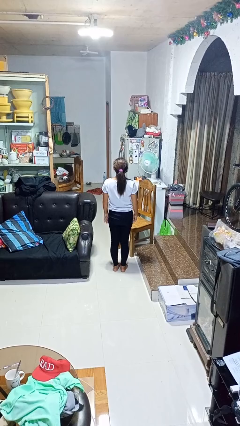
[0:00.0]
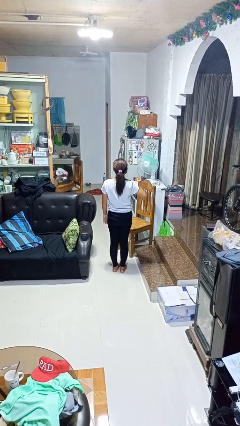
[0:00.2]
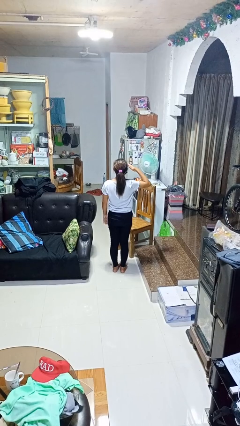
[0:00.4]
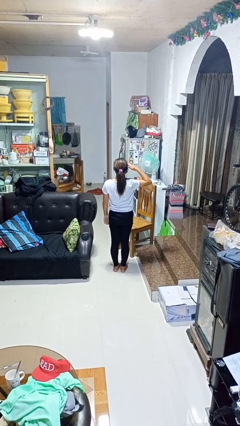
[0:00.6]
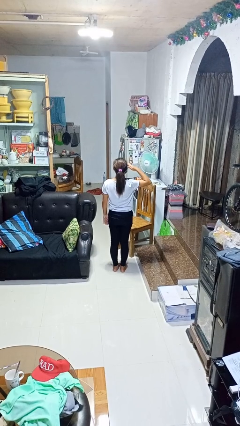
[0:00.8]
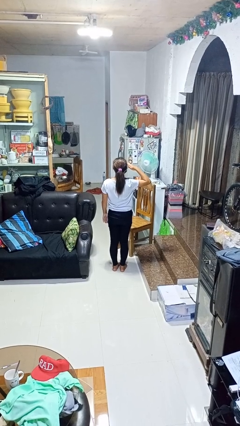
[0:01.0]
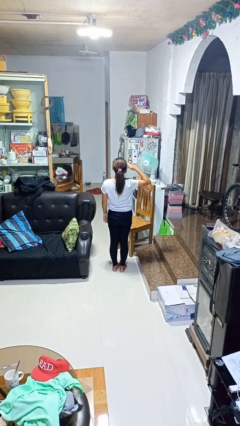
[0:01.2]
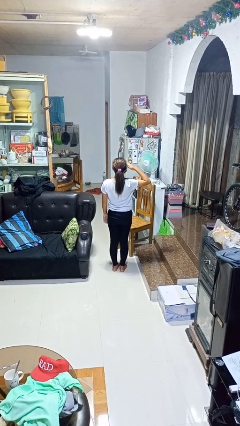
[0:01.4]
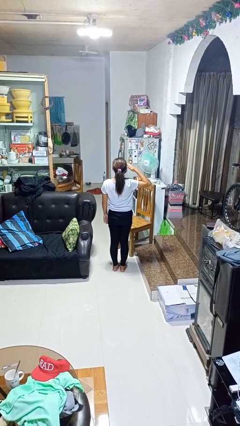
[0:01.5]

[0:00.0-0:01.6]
person salutes

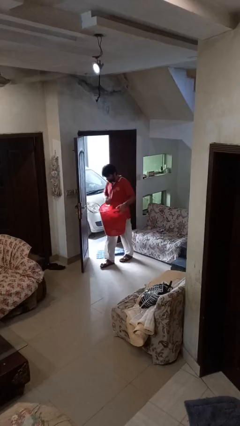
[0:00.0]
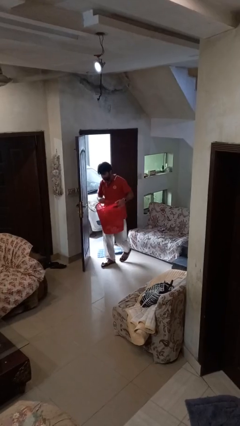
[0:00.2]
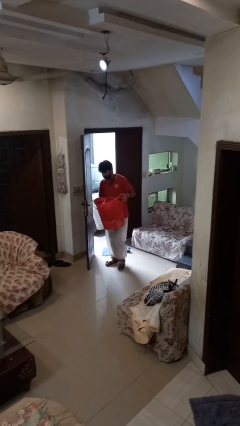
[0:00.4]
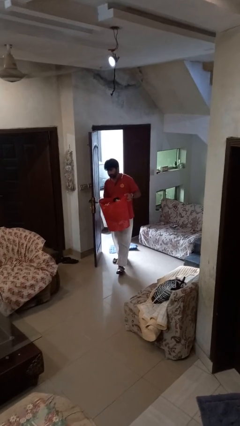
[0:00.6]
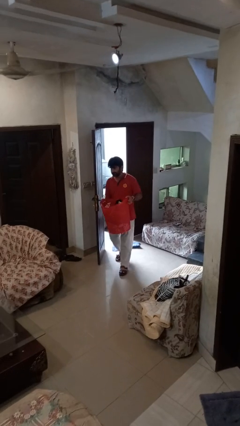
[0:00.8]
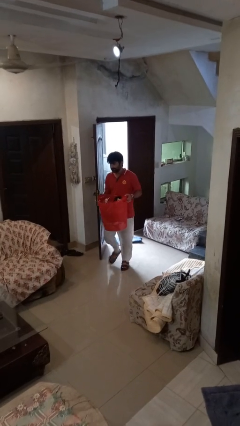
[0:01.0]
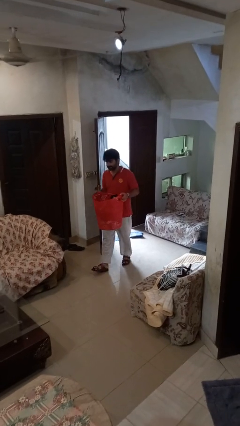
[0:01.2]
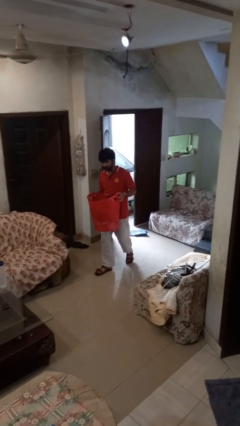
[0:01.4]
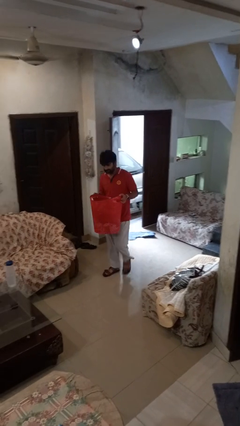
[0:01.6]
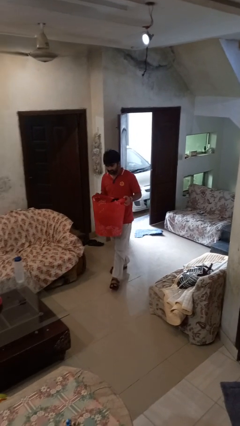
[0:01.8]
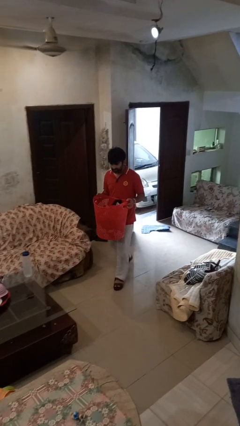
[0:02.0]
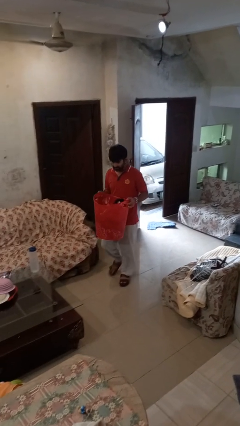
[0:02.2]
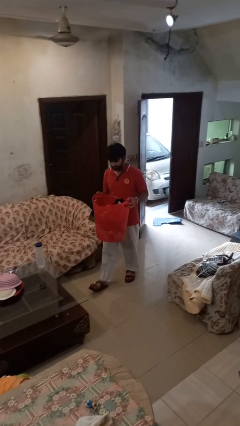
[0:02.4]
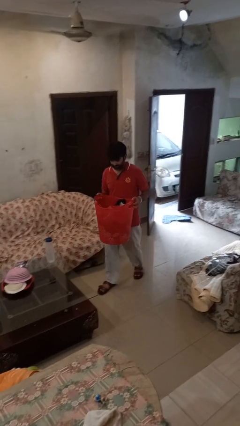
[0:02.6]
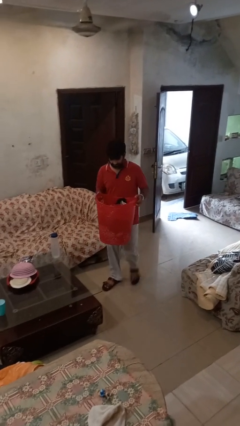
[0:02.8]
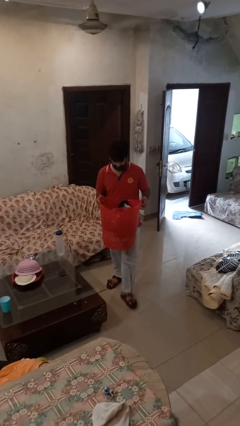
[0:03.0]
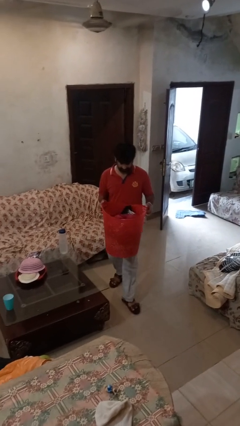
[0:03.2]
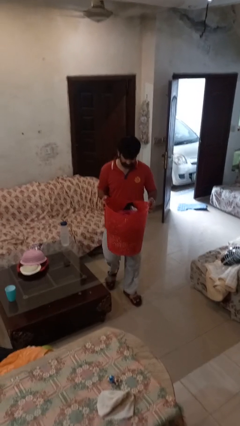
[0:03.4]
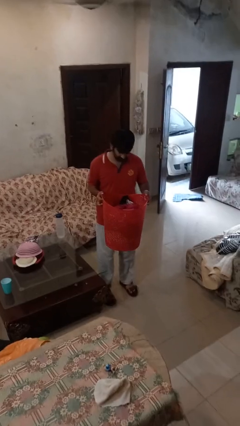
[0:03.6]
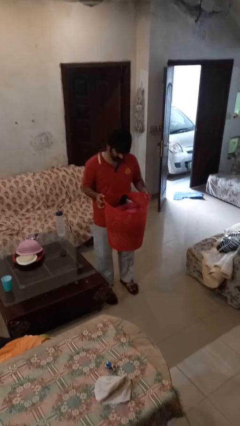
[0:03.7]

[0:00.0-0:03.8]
person carries laundry basket

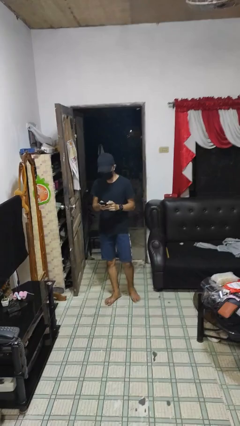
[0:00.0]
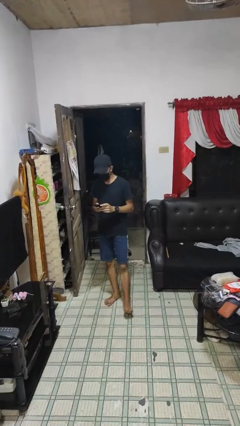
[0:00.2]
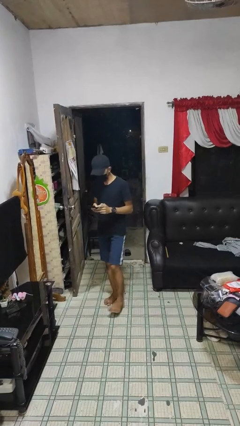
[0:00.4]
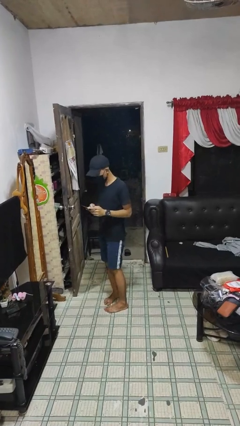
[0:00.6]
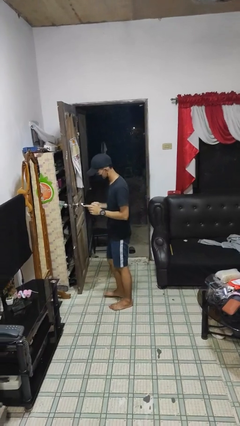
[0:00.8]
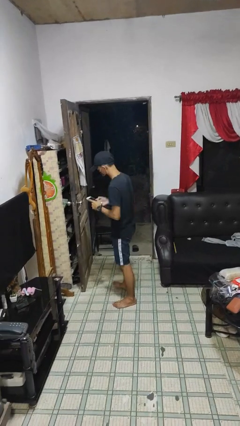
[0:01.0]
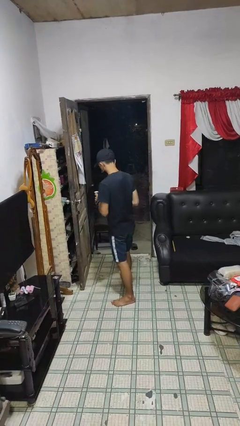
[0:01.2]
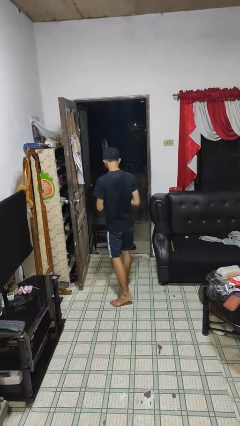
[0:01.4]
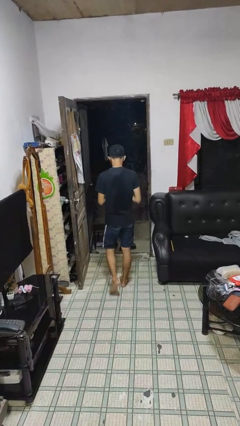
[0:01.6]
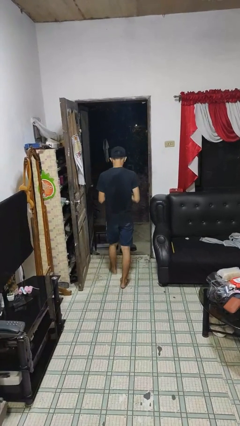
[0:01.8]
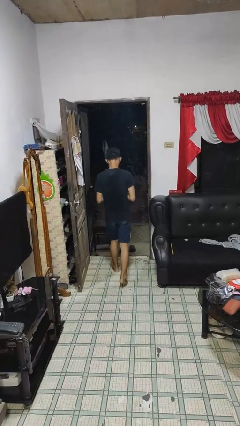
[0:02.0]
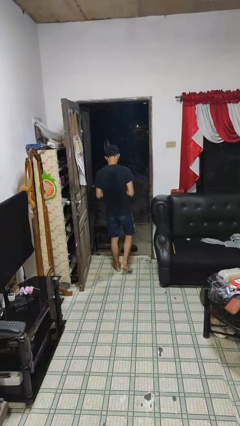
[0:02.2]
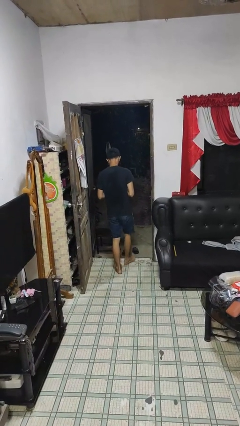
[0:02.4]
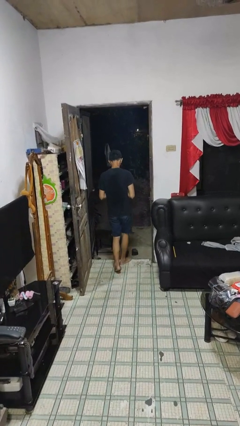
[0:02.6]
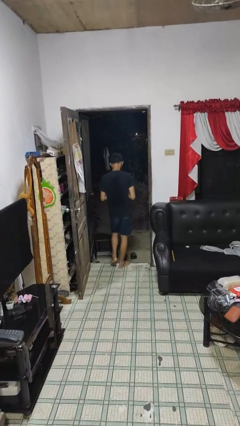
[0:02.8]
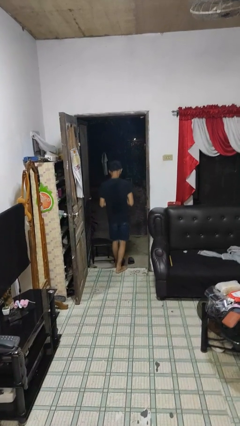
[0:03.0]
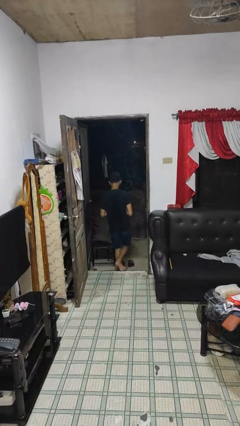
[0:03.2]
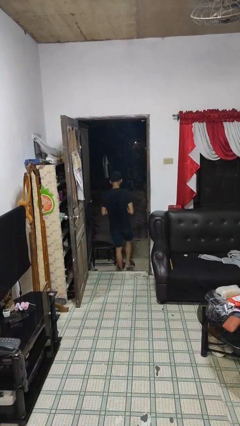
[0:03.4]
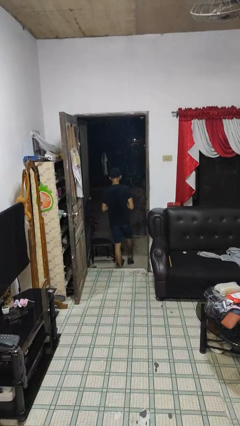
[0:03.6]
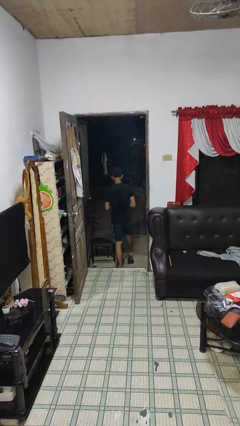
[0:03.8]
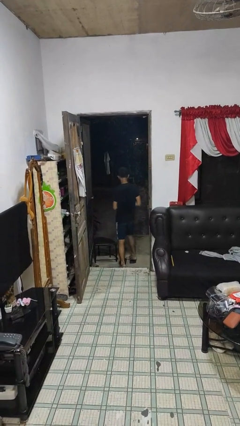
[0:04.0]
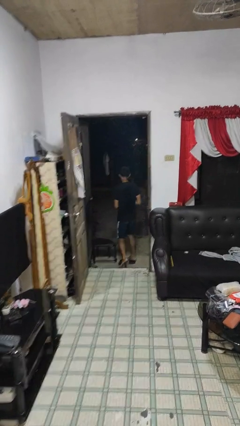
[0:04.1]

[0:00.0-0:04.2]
person exits scene through structure

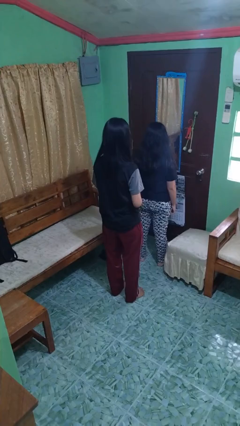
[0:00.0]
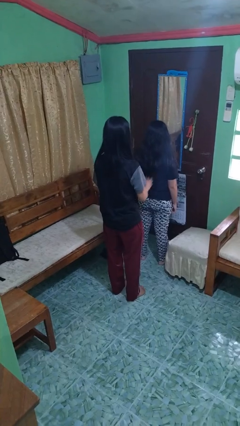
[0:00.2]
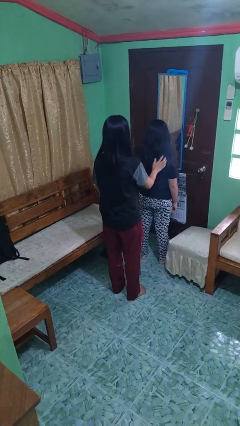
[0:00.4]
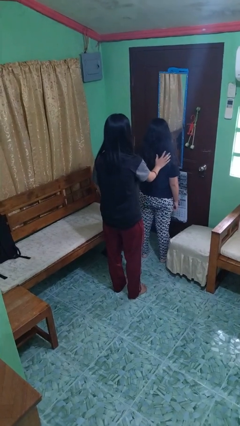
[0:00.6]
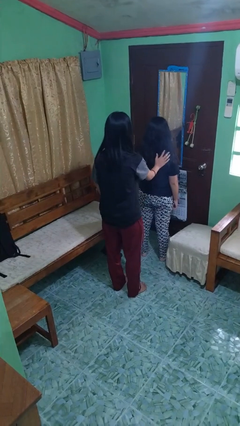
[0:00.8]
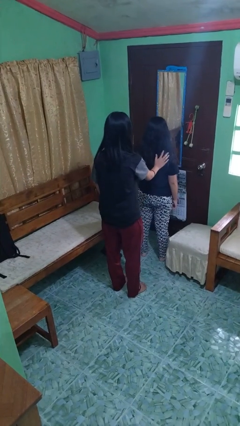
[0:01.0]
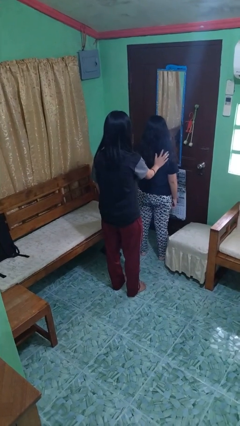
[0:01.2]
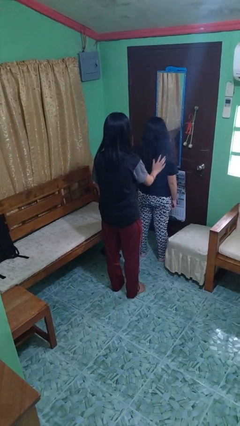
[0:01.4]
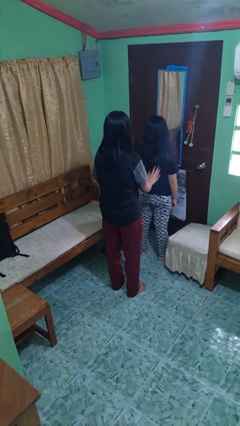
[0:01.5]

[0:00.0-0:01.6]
person touches back of person

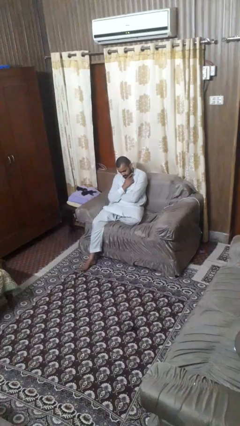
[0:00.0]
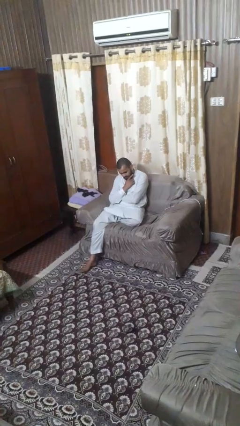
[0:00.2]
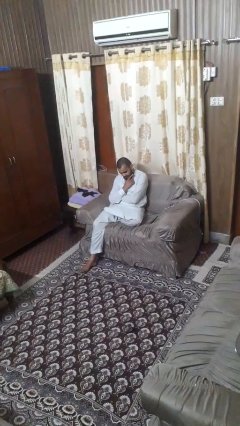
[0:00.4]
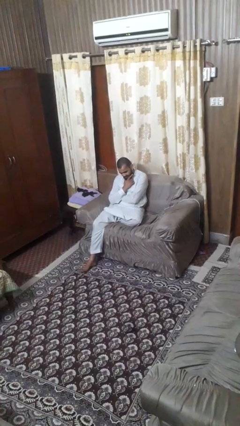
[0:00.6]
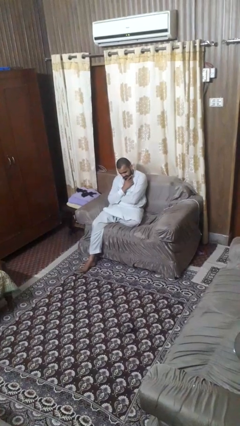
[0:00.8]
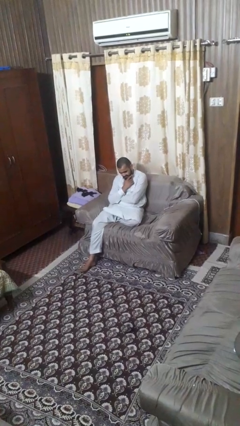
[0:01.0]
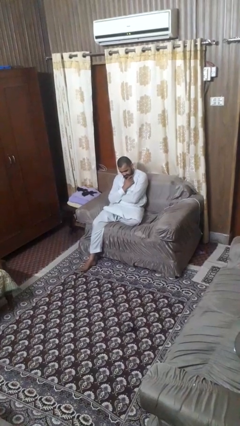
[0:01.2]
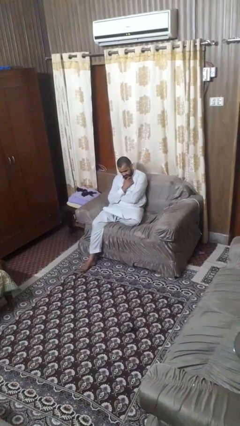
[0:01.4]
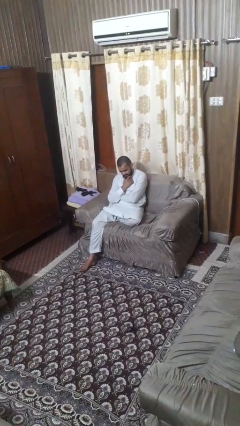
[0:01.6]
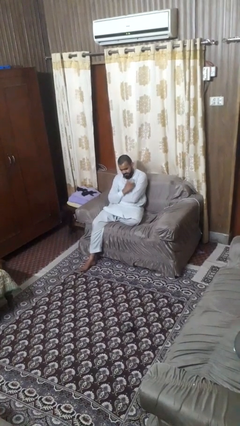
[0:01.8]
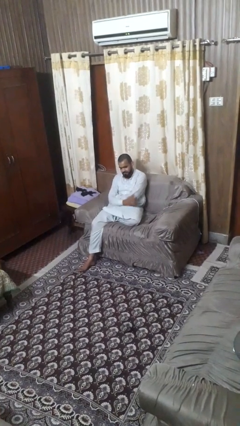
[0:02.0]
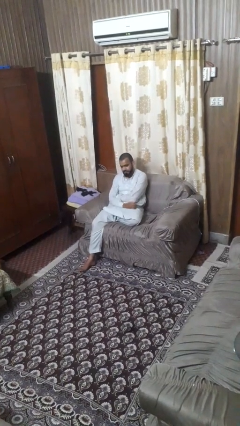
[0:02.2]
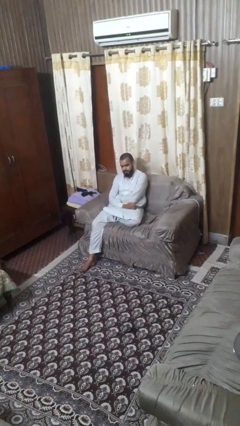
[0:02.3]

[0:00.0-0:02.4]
person strokes chin

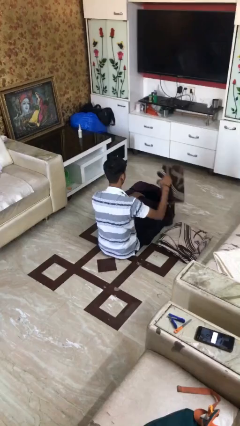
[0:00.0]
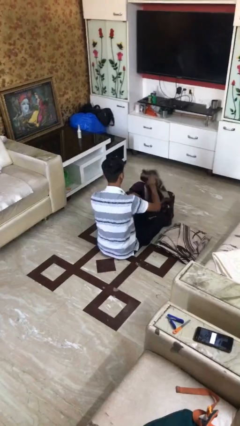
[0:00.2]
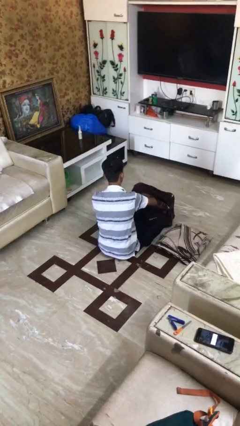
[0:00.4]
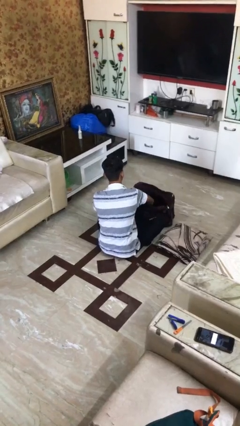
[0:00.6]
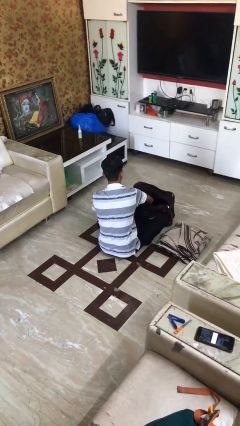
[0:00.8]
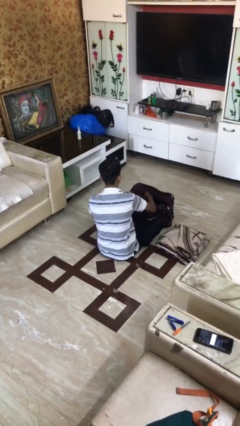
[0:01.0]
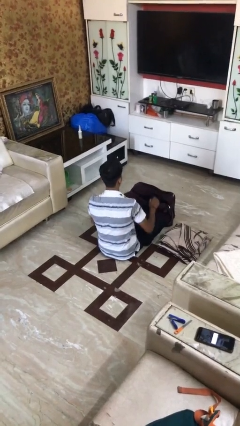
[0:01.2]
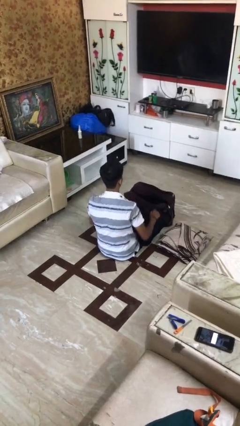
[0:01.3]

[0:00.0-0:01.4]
person loads clothes into suitcase

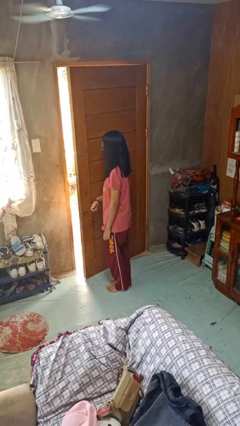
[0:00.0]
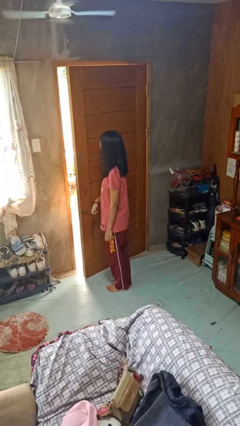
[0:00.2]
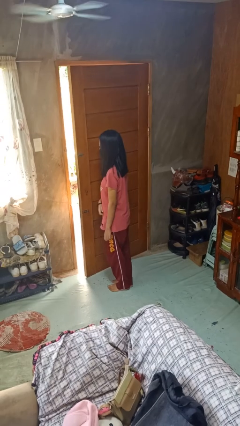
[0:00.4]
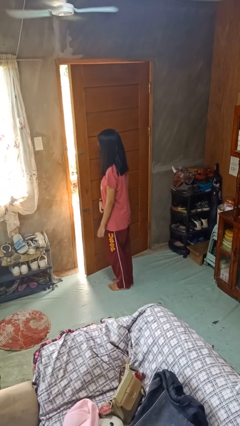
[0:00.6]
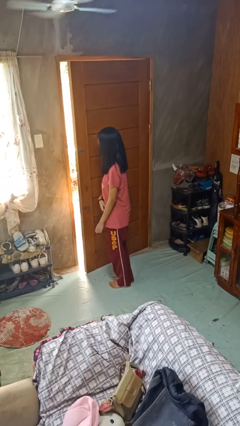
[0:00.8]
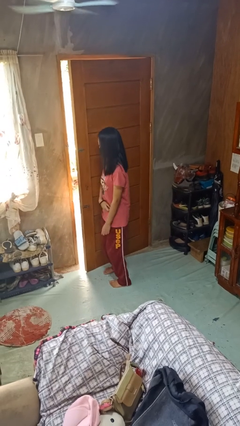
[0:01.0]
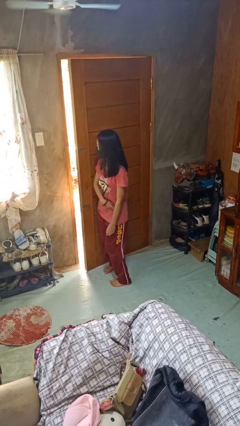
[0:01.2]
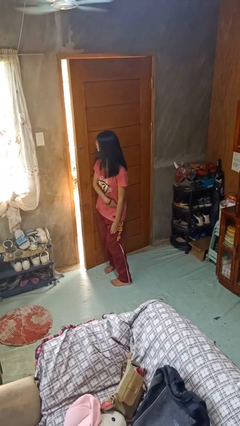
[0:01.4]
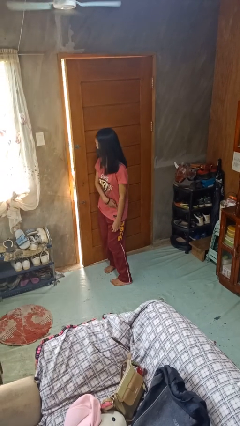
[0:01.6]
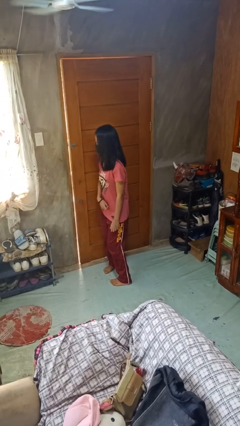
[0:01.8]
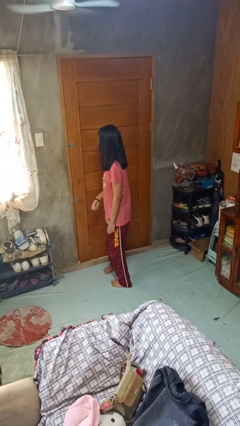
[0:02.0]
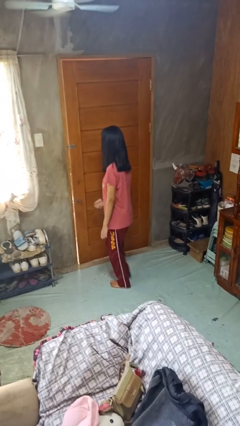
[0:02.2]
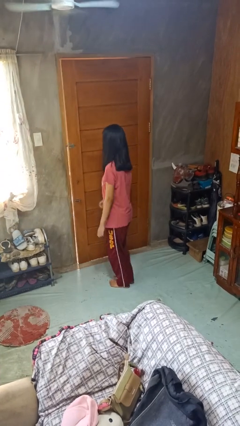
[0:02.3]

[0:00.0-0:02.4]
person closes door with hip
